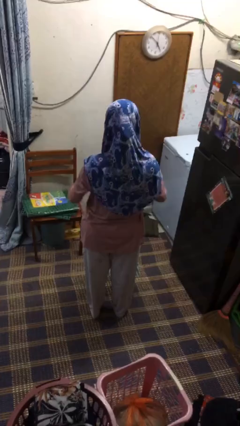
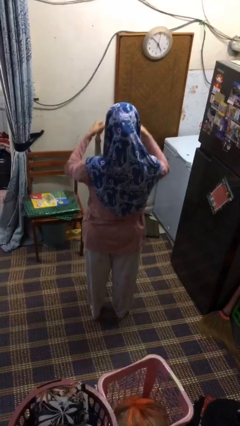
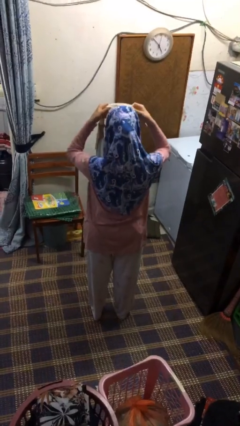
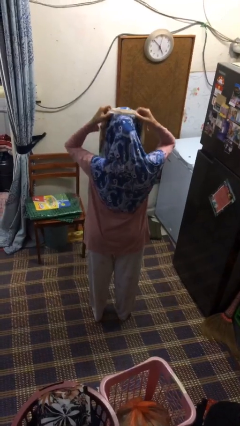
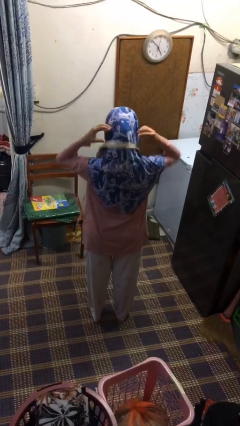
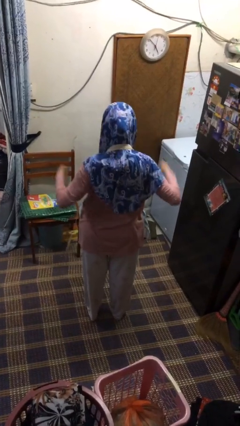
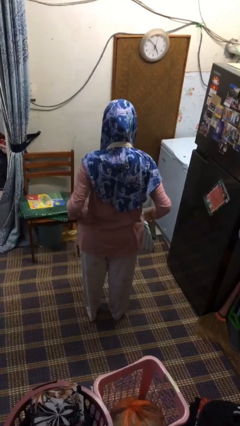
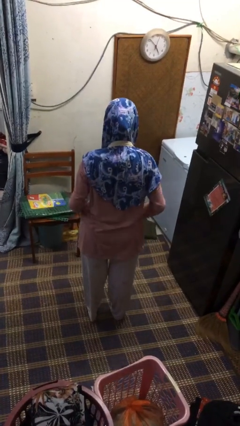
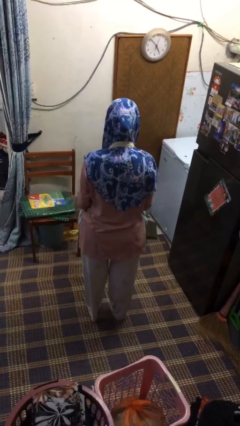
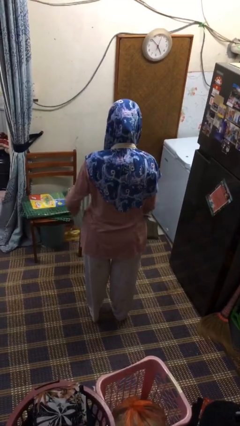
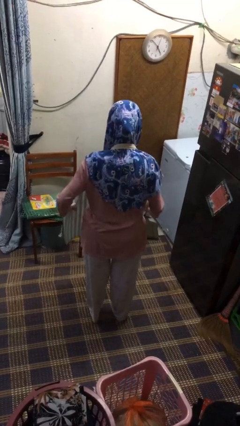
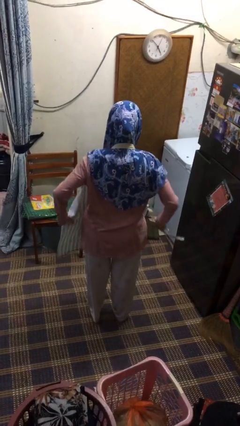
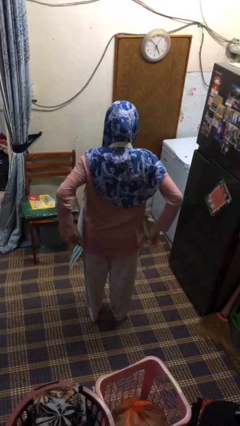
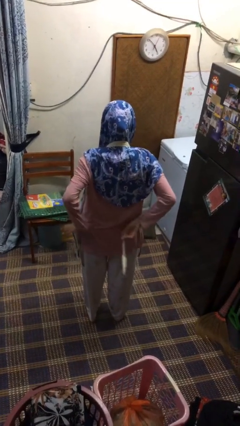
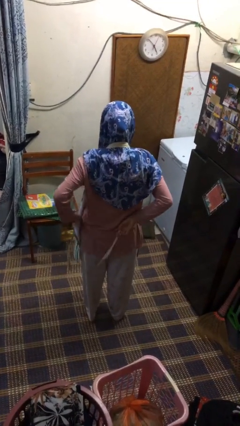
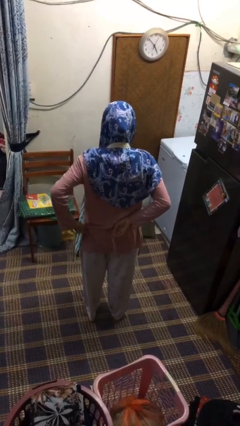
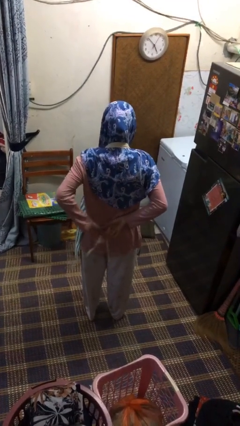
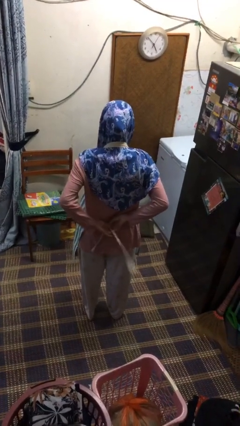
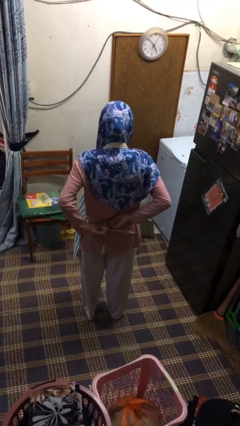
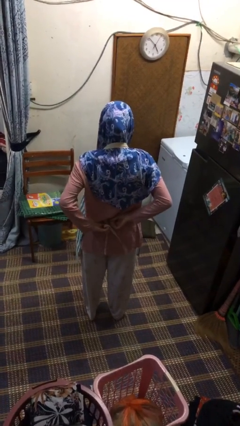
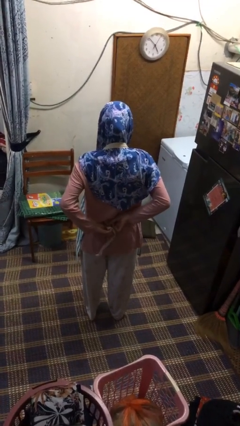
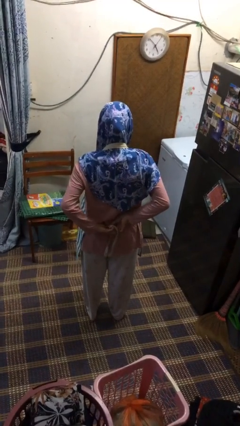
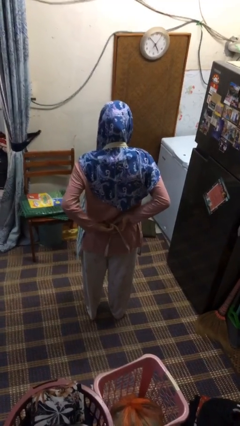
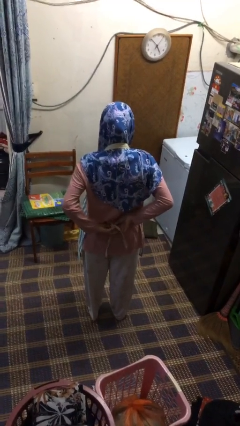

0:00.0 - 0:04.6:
person puts on apron

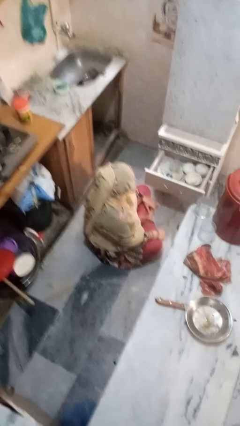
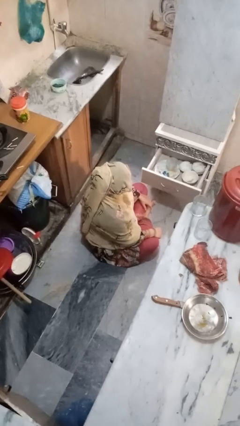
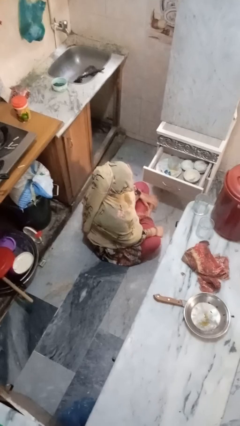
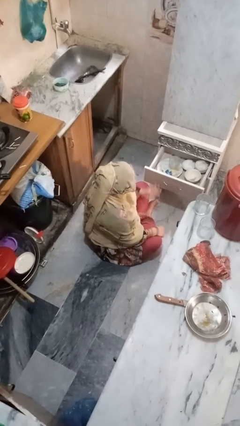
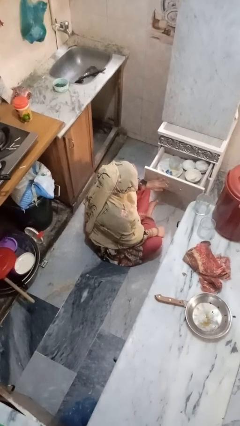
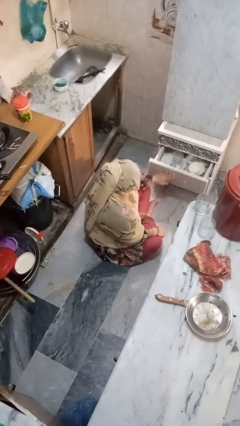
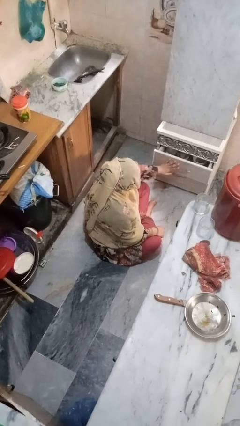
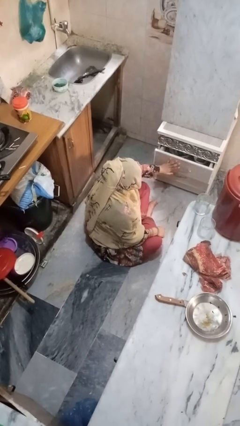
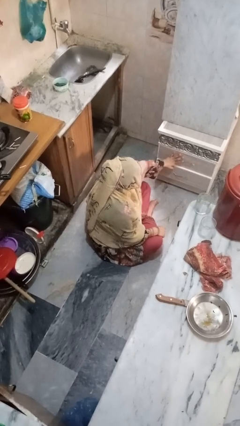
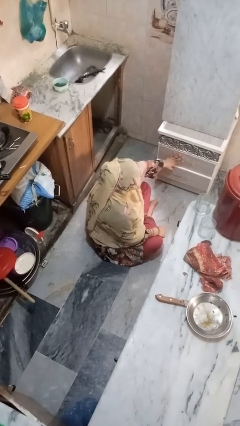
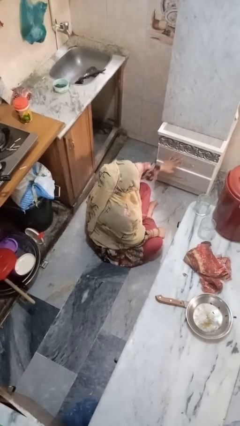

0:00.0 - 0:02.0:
person closes kitchen drawer

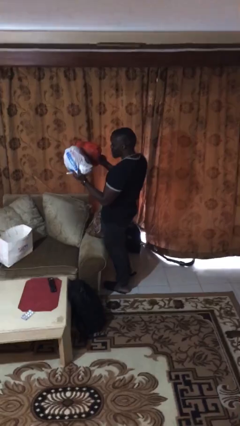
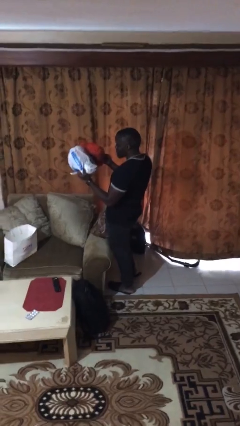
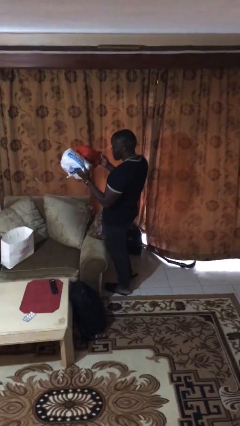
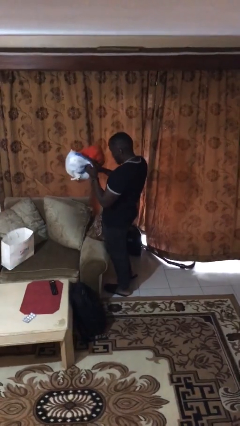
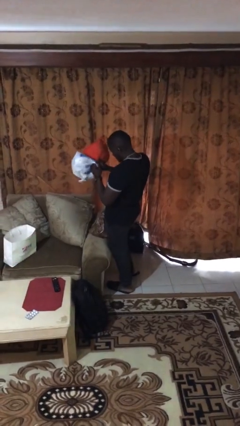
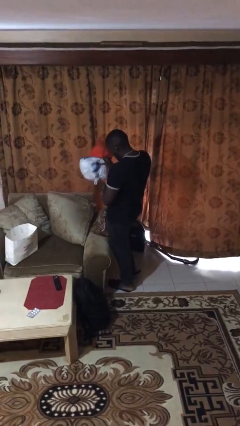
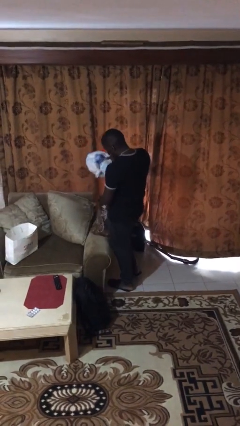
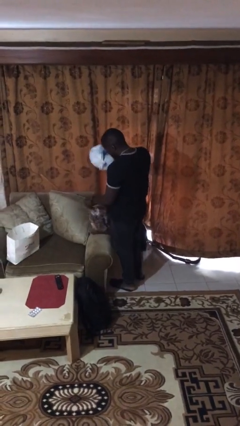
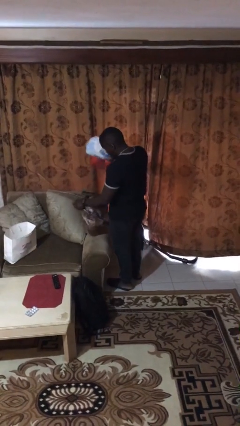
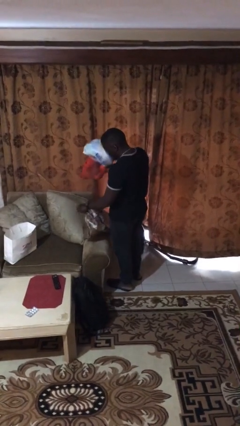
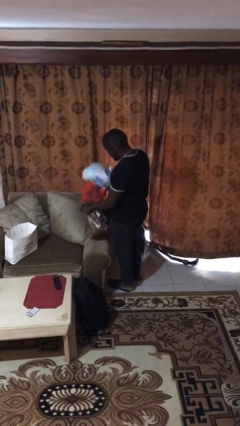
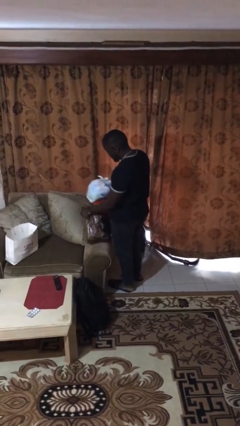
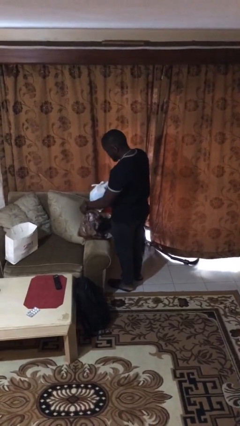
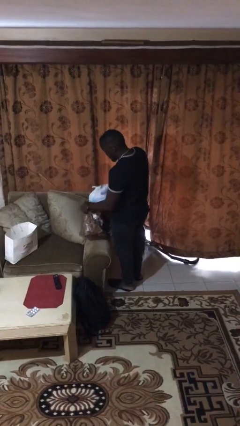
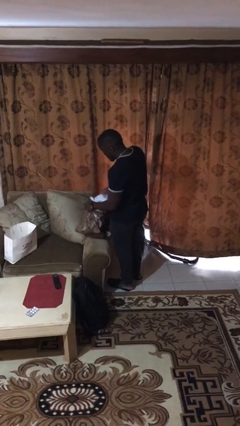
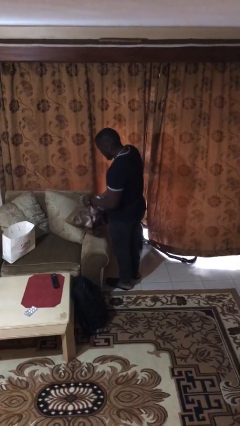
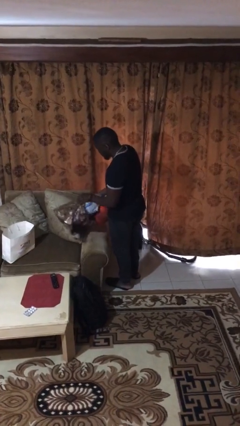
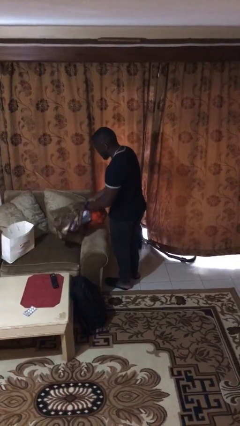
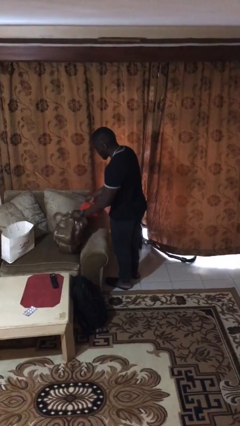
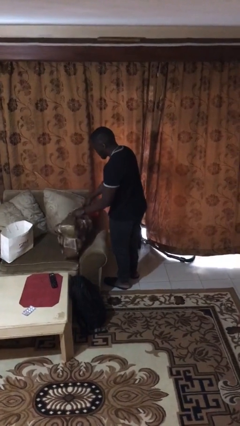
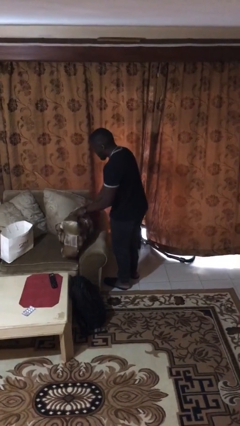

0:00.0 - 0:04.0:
person puts object into bag

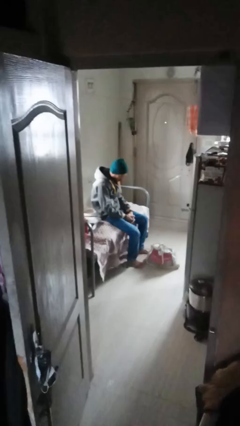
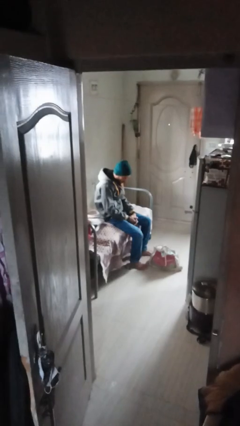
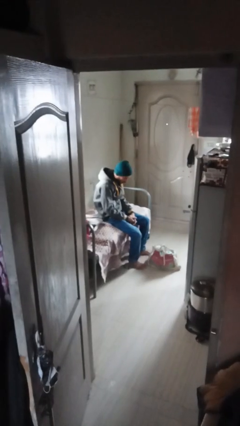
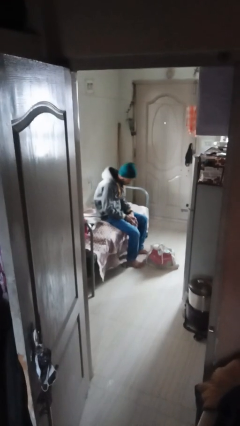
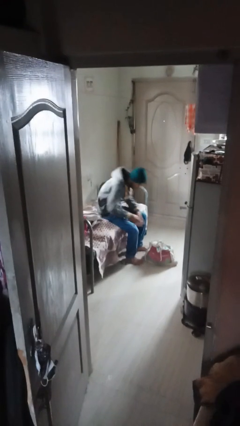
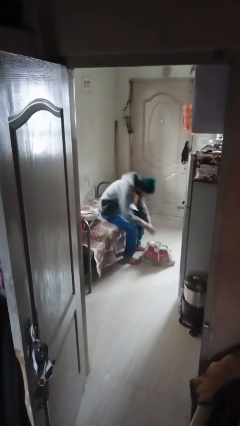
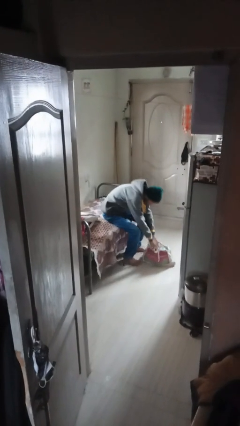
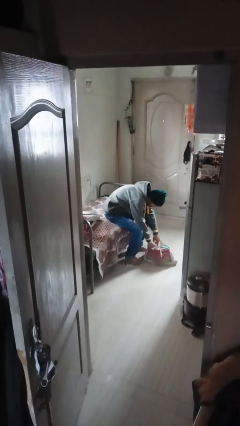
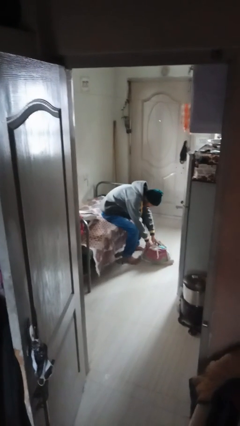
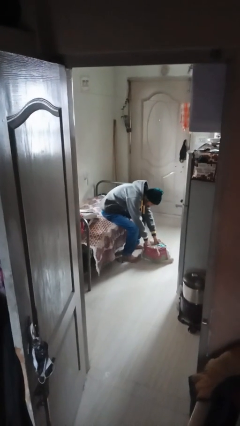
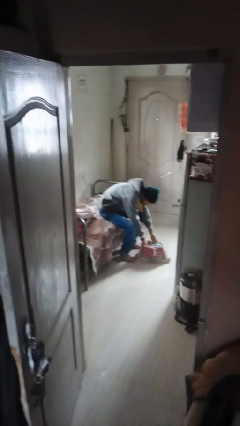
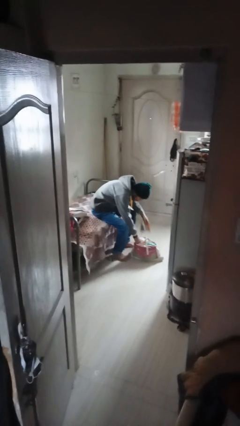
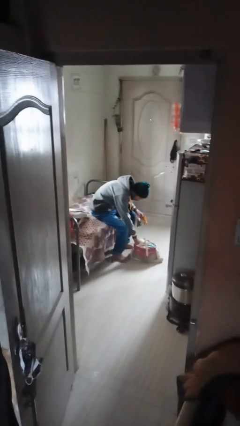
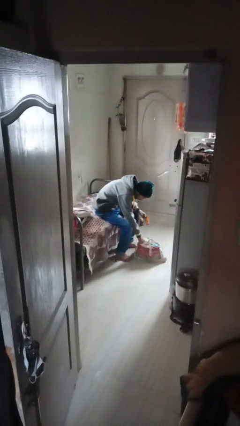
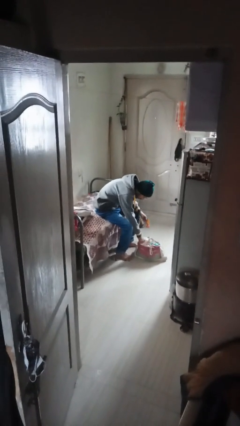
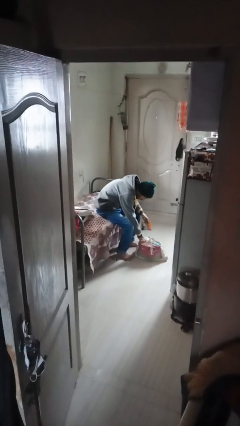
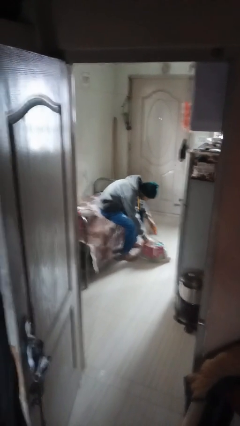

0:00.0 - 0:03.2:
person searches in bag
